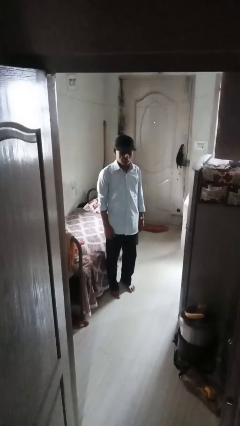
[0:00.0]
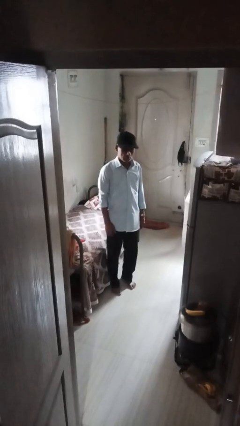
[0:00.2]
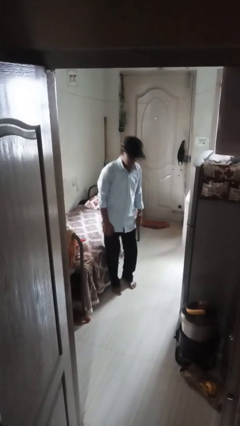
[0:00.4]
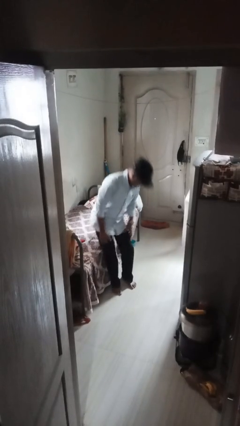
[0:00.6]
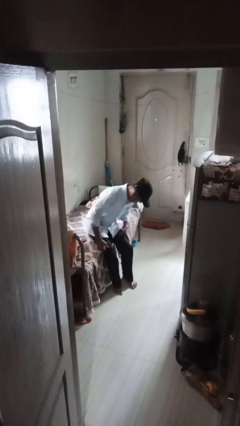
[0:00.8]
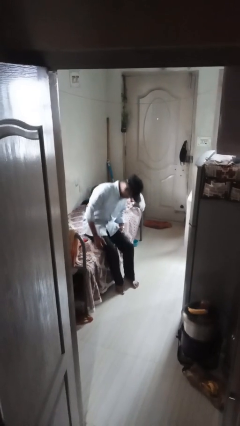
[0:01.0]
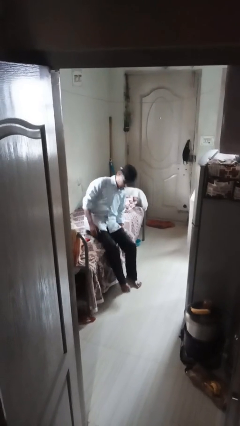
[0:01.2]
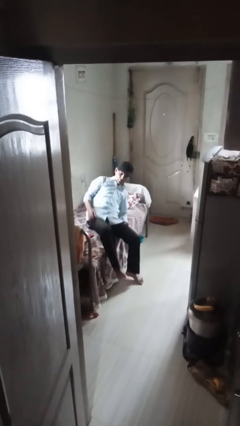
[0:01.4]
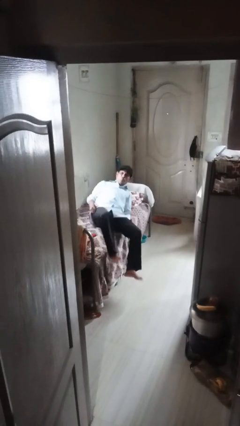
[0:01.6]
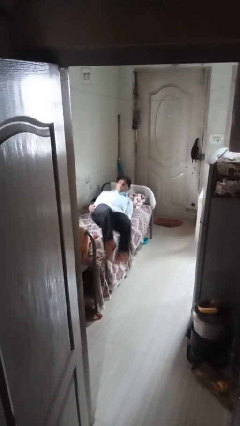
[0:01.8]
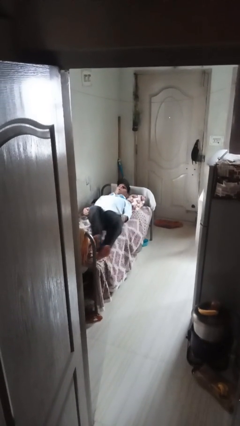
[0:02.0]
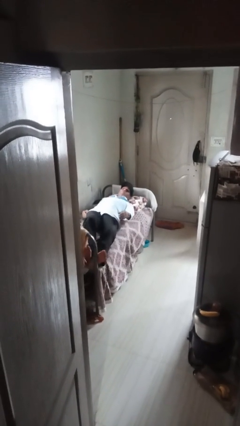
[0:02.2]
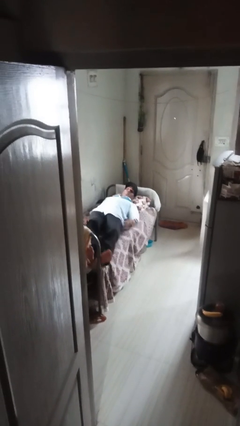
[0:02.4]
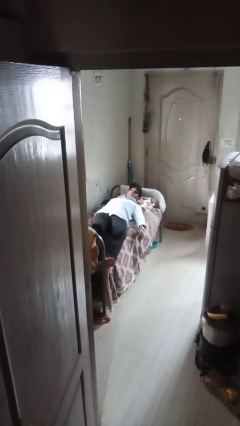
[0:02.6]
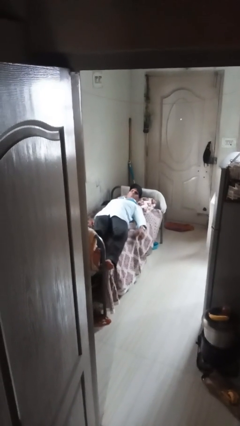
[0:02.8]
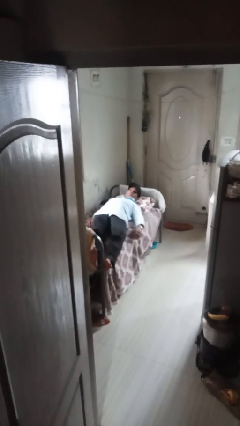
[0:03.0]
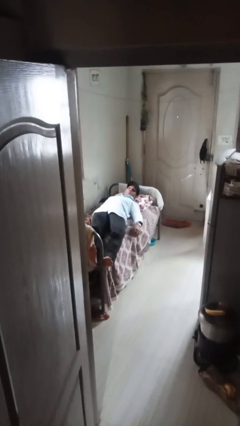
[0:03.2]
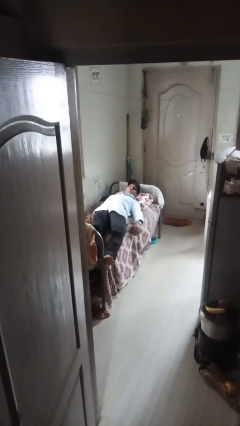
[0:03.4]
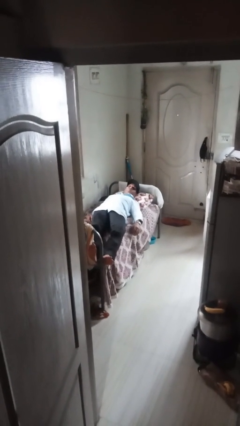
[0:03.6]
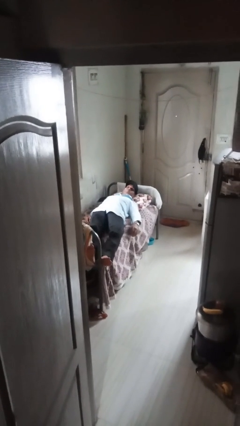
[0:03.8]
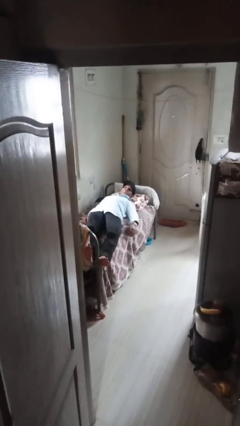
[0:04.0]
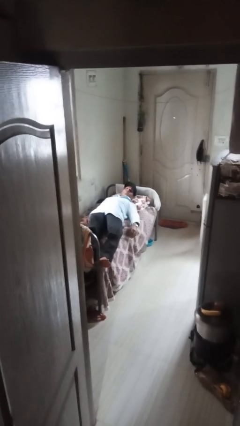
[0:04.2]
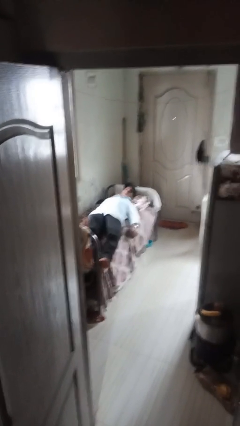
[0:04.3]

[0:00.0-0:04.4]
person lies down on bed

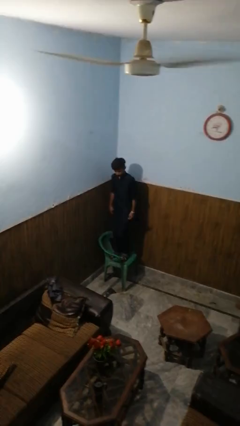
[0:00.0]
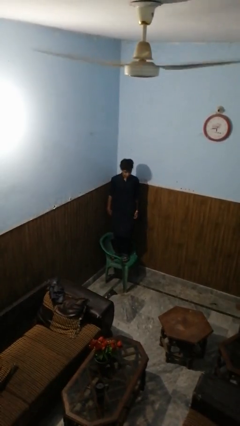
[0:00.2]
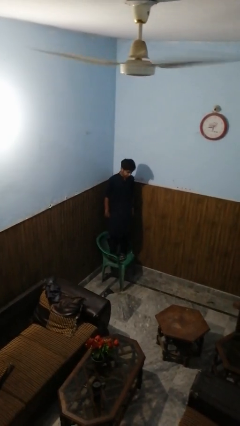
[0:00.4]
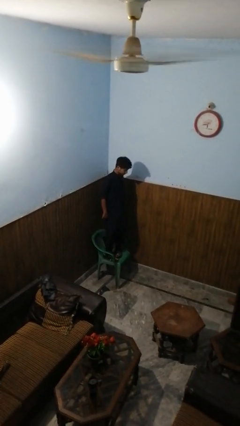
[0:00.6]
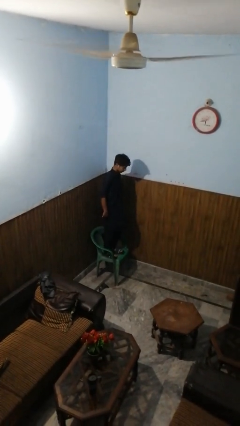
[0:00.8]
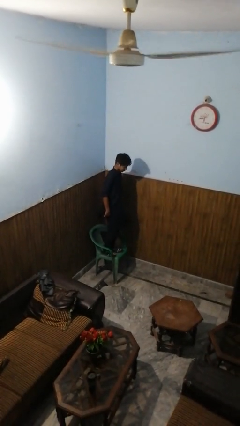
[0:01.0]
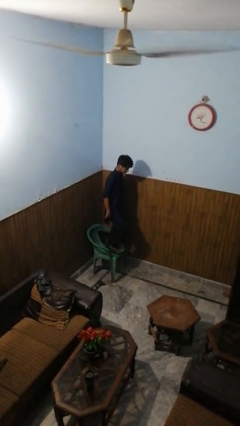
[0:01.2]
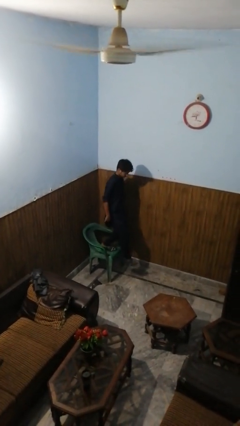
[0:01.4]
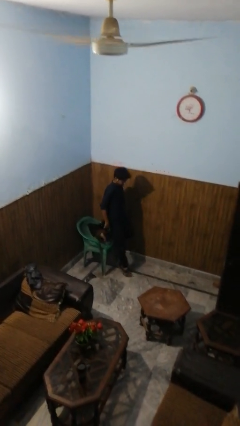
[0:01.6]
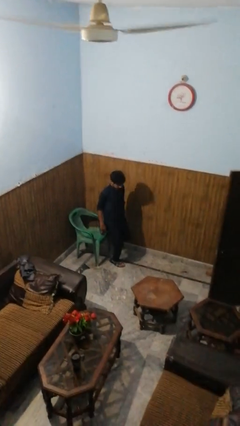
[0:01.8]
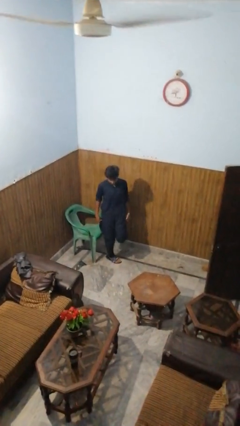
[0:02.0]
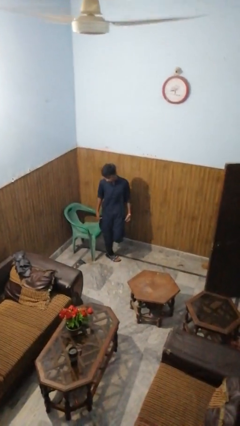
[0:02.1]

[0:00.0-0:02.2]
person climbs off chair

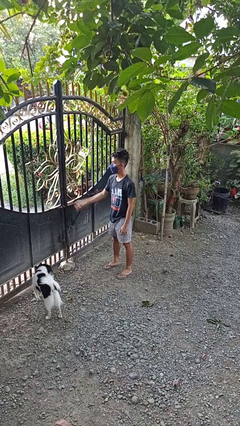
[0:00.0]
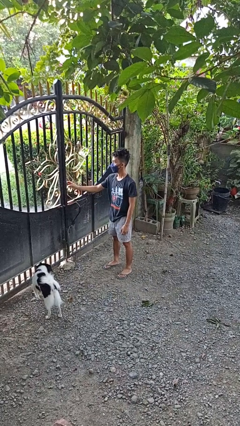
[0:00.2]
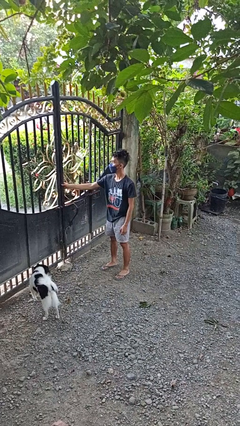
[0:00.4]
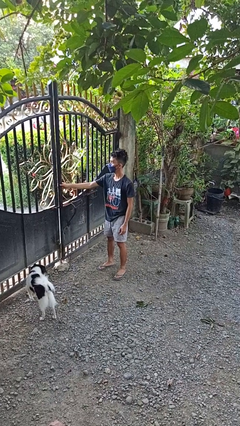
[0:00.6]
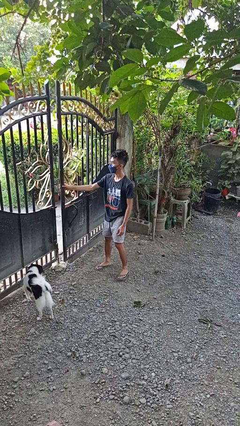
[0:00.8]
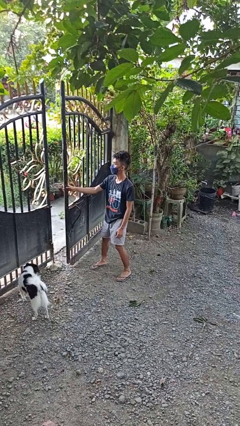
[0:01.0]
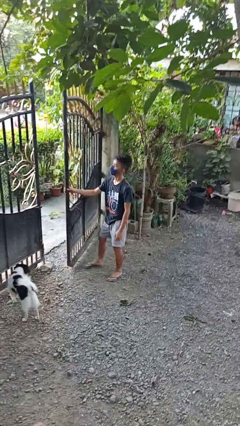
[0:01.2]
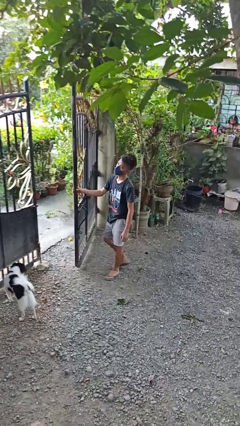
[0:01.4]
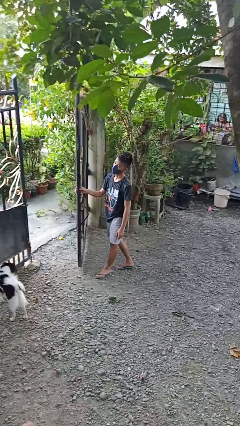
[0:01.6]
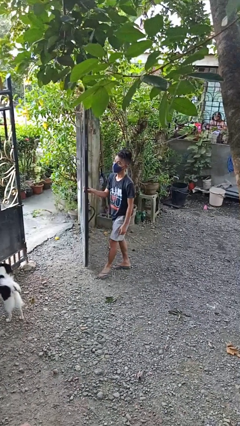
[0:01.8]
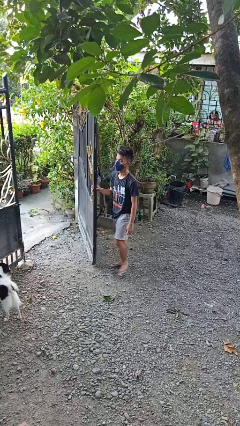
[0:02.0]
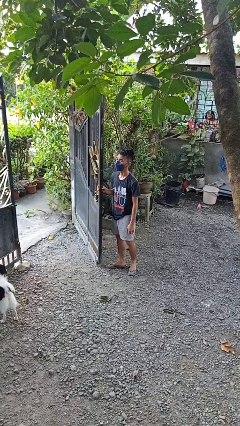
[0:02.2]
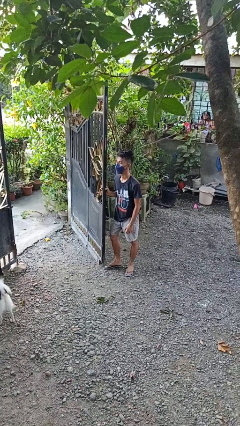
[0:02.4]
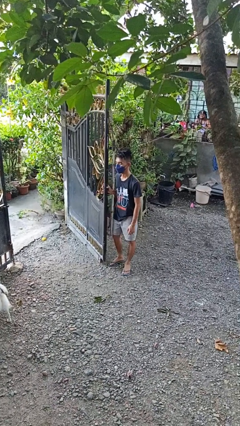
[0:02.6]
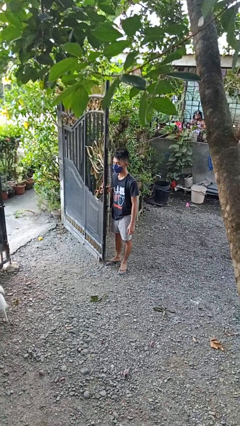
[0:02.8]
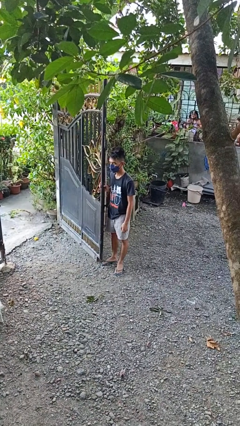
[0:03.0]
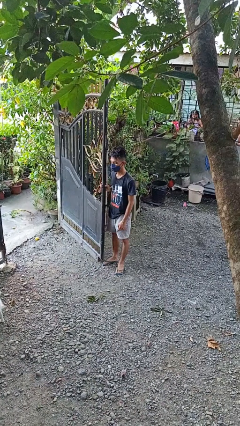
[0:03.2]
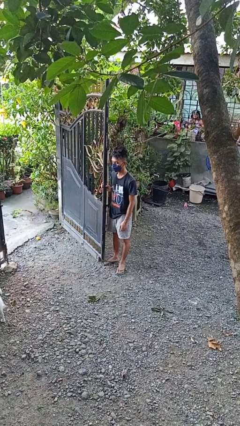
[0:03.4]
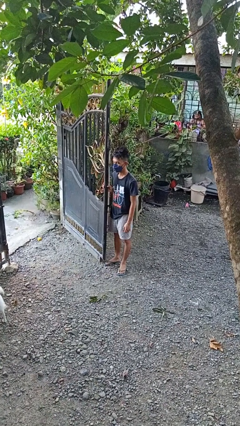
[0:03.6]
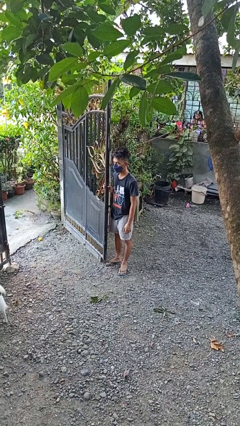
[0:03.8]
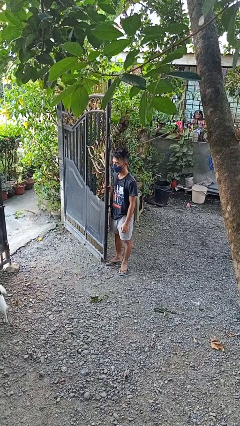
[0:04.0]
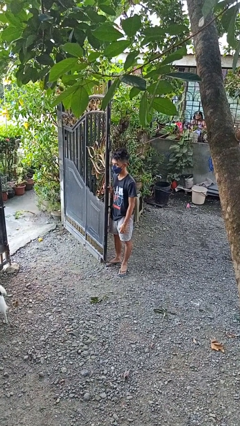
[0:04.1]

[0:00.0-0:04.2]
person opens gate

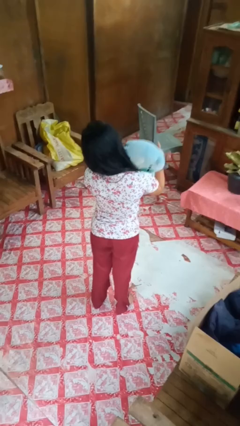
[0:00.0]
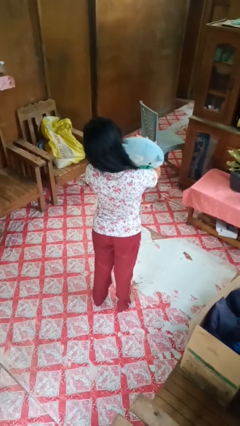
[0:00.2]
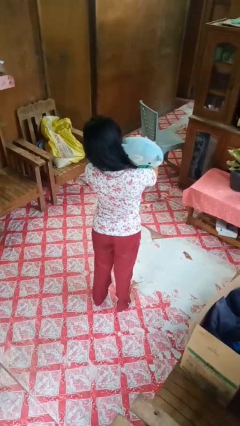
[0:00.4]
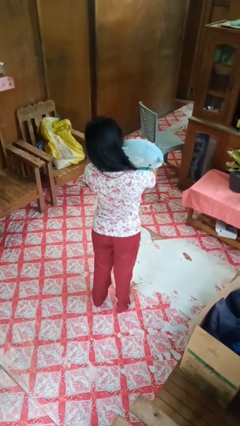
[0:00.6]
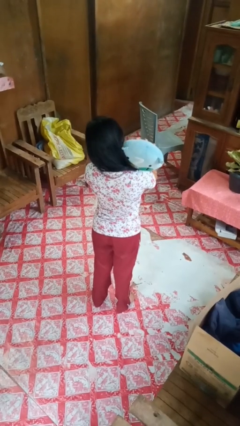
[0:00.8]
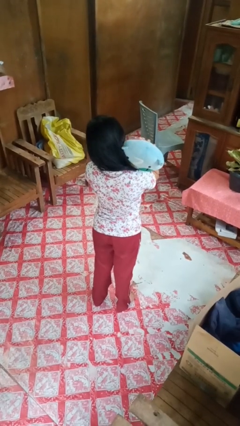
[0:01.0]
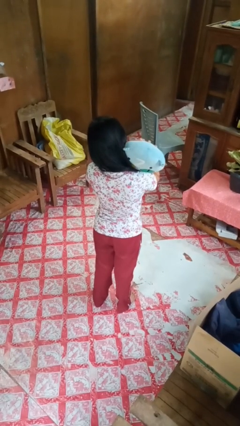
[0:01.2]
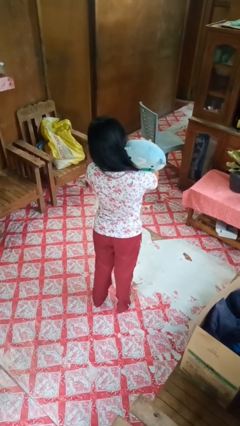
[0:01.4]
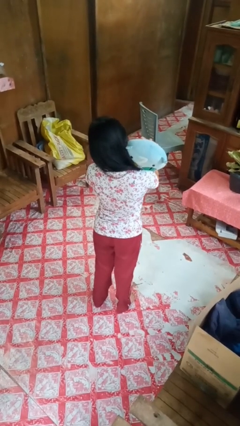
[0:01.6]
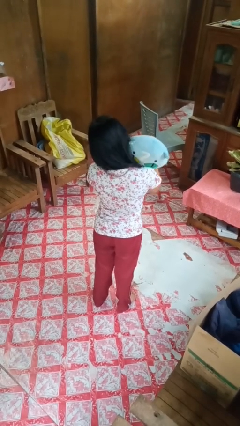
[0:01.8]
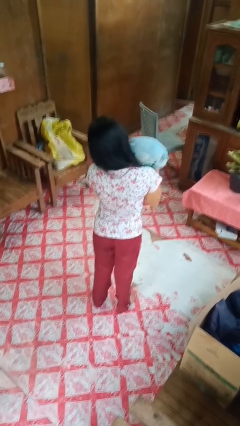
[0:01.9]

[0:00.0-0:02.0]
person hugs stuffed animal

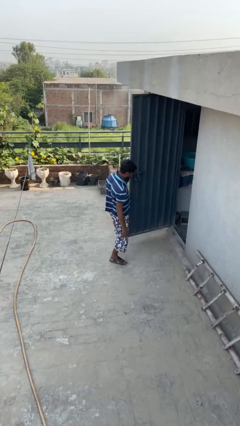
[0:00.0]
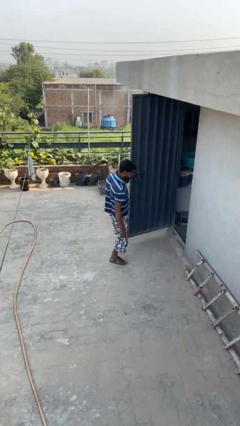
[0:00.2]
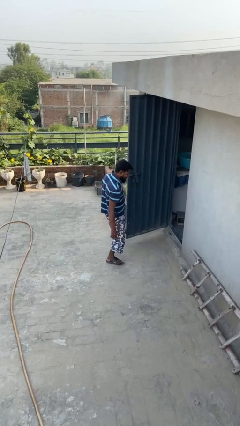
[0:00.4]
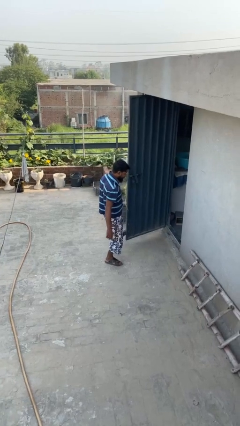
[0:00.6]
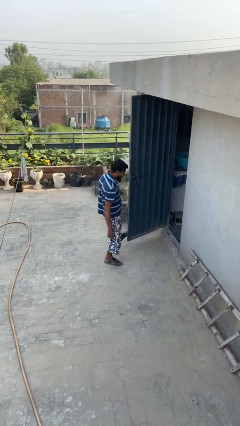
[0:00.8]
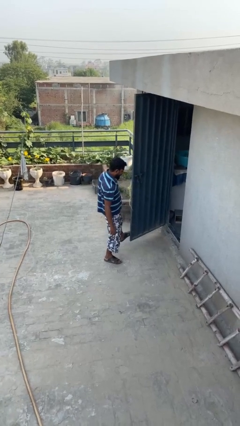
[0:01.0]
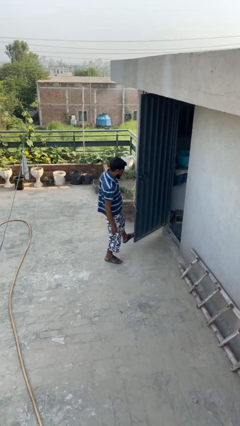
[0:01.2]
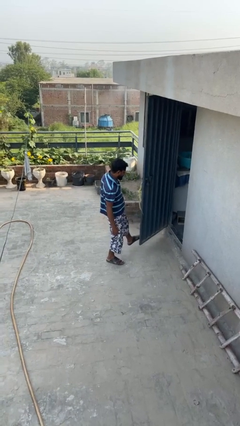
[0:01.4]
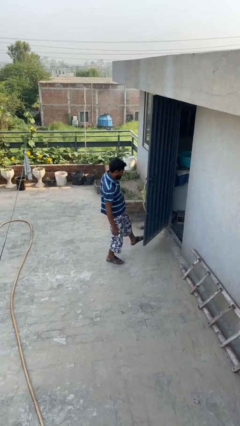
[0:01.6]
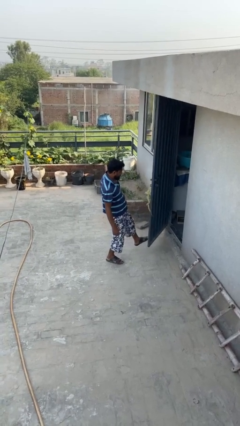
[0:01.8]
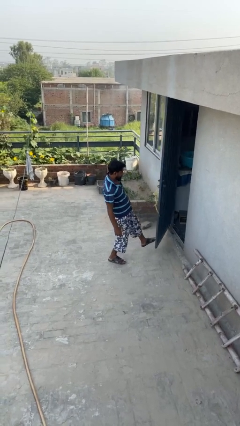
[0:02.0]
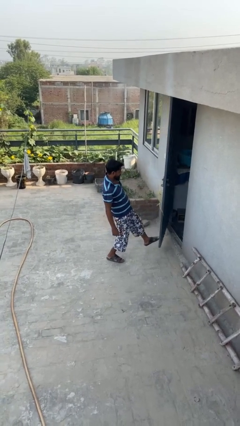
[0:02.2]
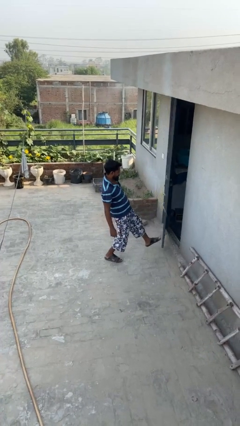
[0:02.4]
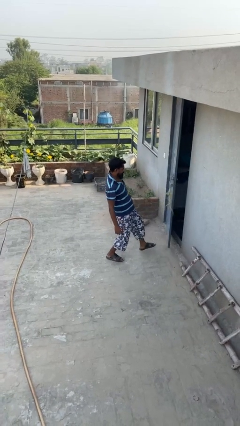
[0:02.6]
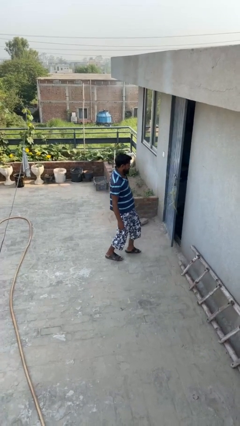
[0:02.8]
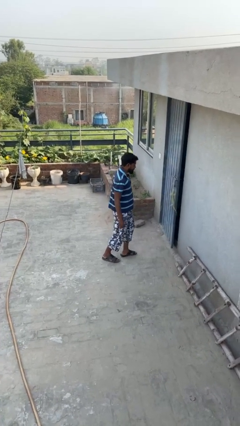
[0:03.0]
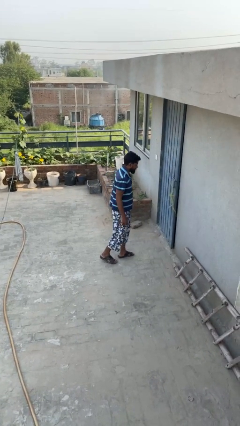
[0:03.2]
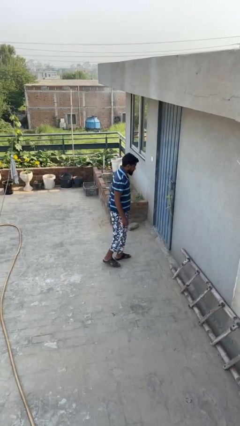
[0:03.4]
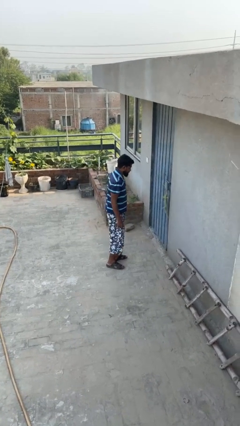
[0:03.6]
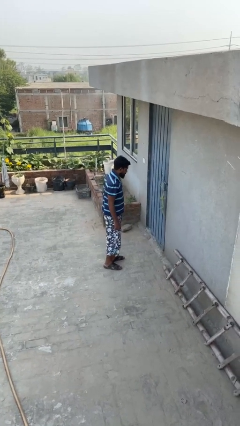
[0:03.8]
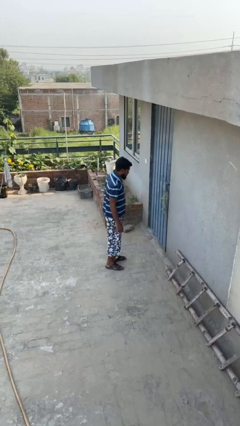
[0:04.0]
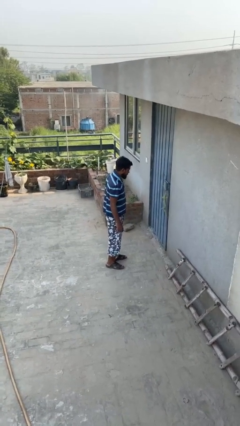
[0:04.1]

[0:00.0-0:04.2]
person closes door with foot

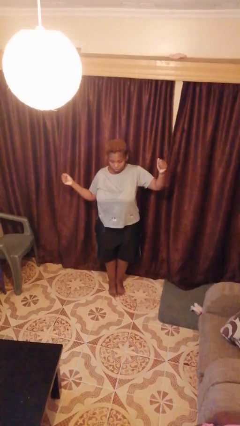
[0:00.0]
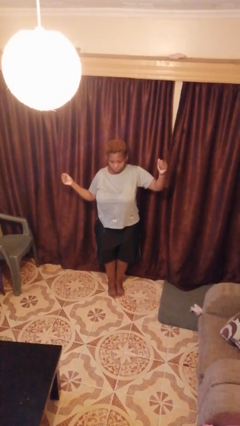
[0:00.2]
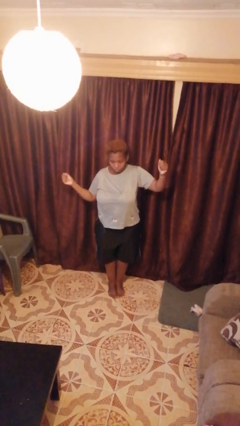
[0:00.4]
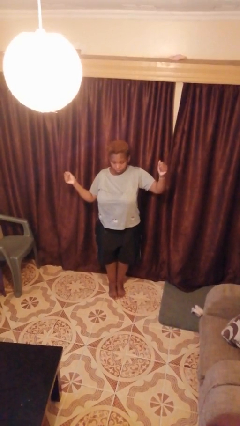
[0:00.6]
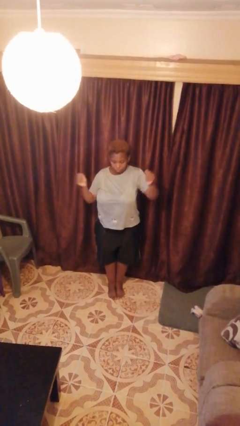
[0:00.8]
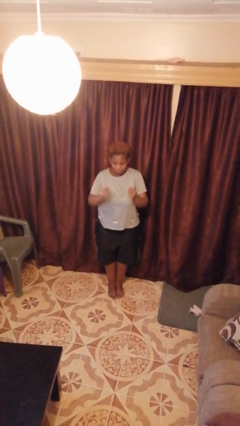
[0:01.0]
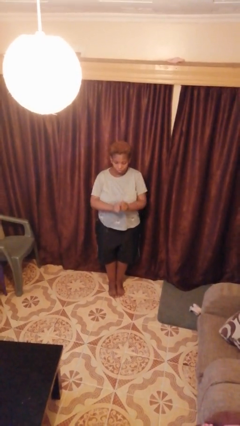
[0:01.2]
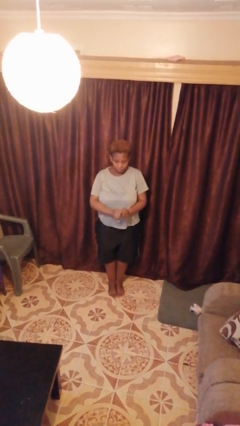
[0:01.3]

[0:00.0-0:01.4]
person gestures zoom out
